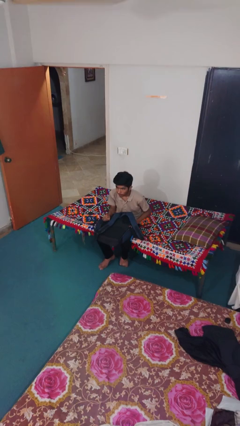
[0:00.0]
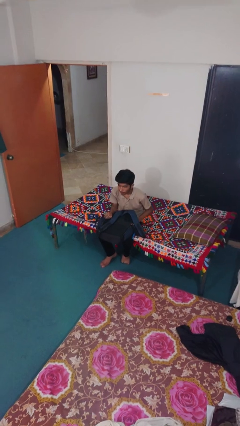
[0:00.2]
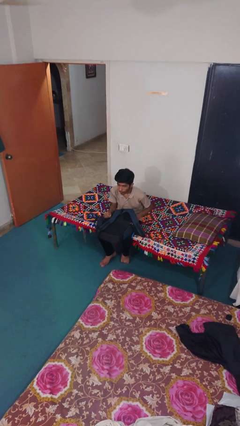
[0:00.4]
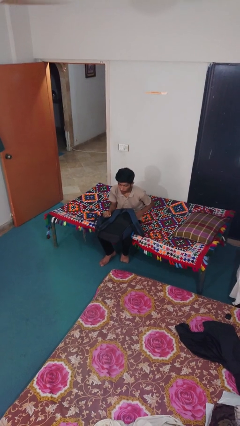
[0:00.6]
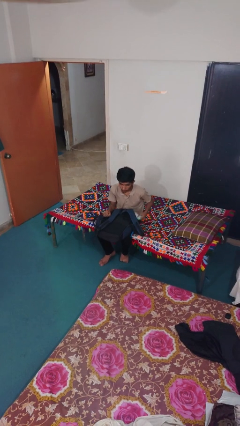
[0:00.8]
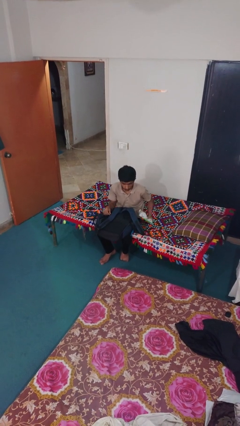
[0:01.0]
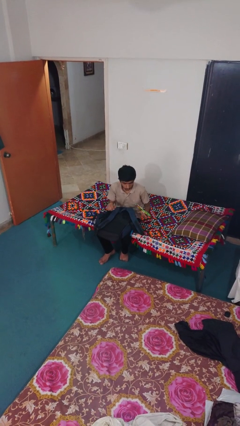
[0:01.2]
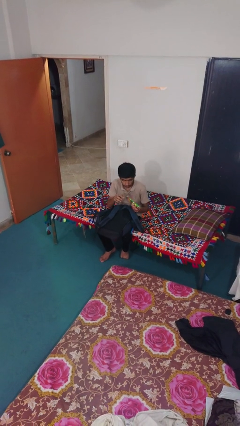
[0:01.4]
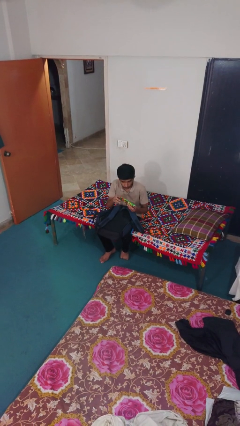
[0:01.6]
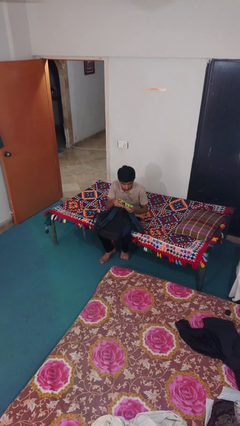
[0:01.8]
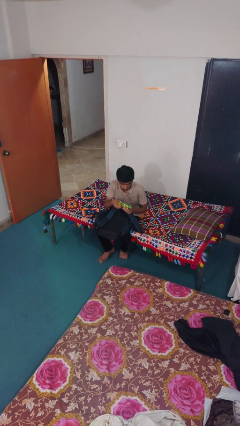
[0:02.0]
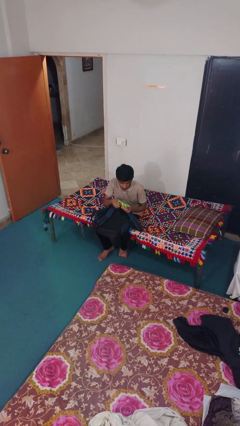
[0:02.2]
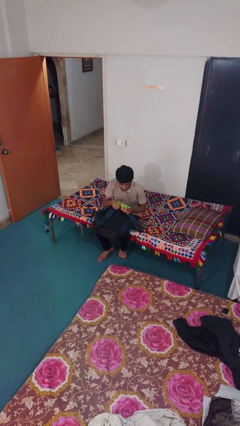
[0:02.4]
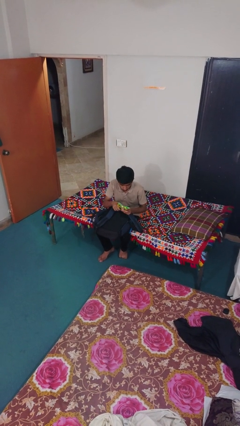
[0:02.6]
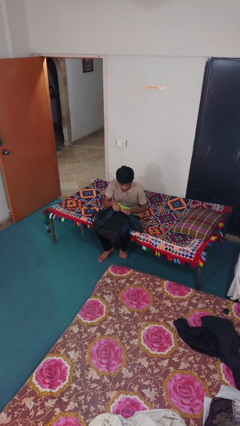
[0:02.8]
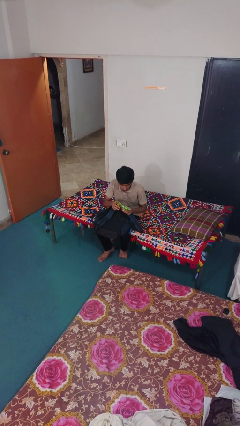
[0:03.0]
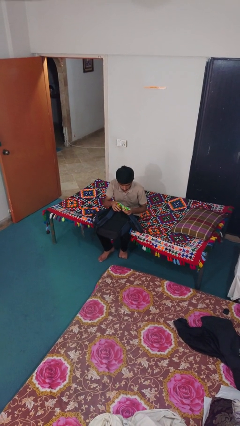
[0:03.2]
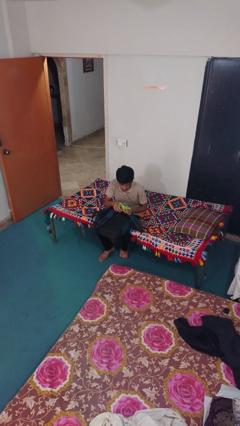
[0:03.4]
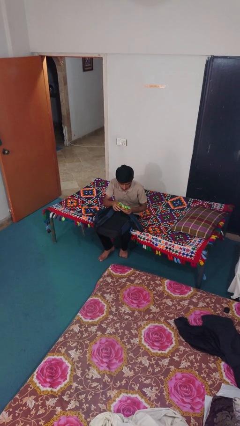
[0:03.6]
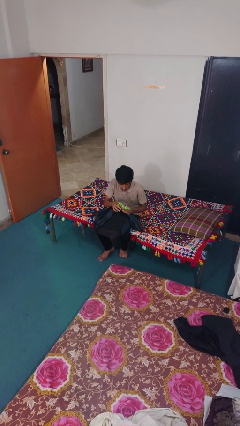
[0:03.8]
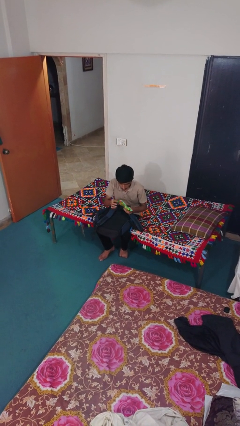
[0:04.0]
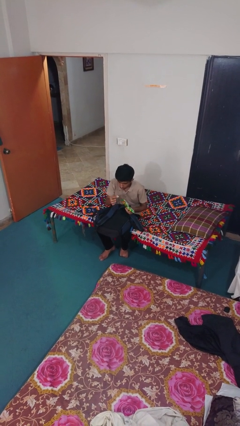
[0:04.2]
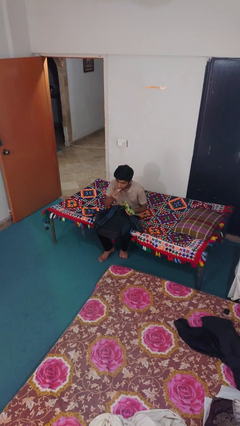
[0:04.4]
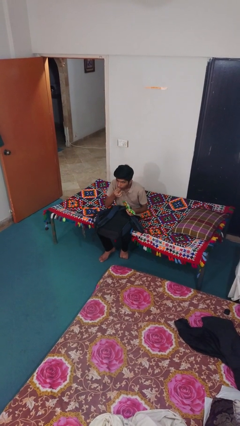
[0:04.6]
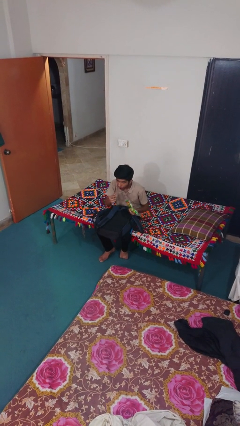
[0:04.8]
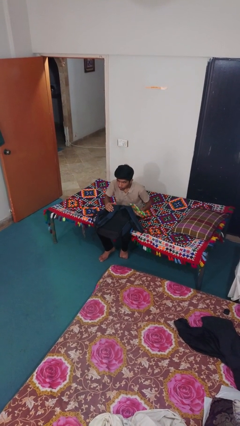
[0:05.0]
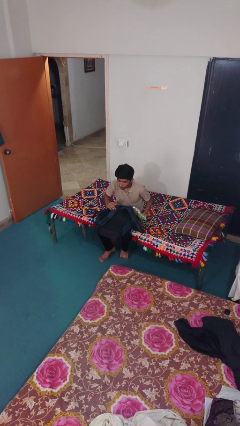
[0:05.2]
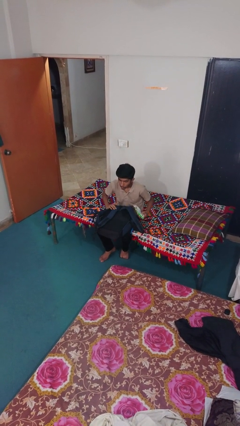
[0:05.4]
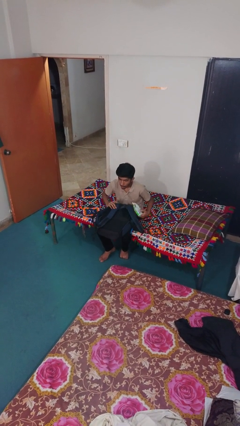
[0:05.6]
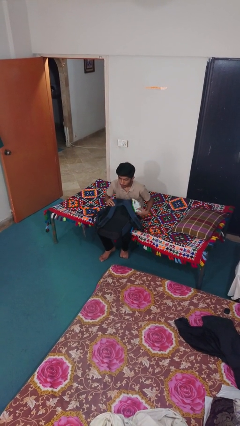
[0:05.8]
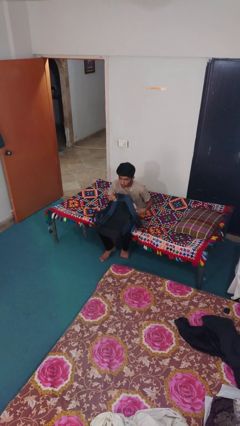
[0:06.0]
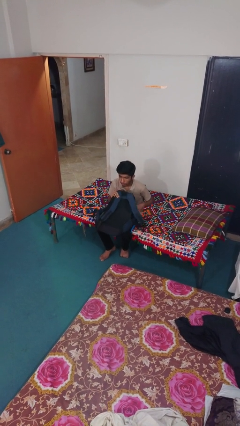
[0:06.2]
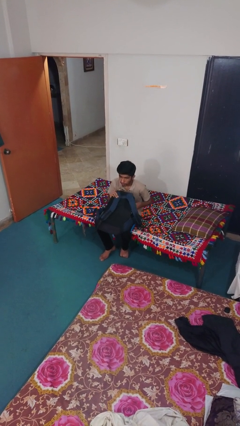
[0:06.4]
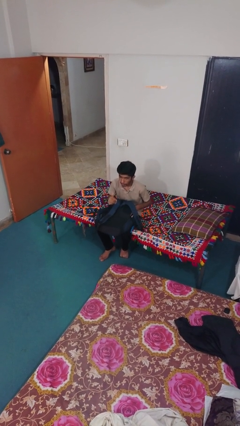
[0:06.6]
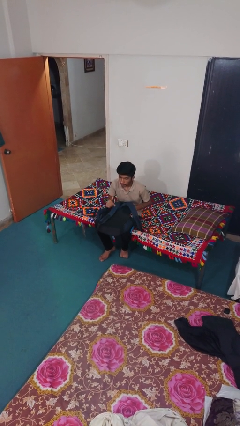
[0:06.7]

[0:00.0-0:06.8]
person eats snack from bag

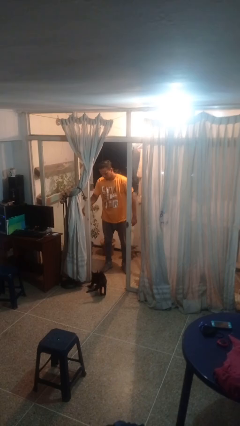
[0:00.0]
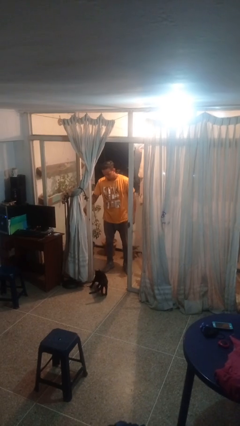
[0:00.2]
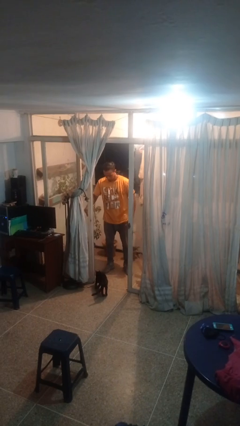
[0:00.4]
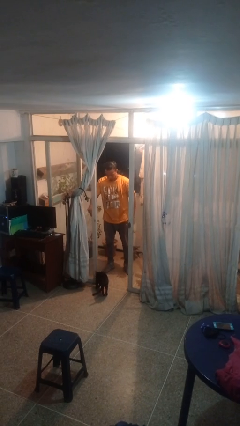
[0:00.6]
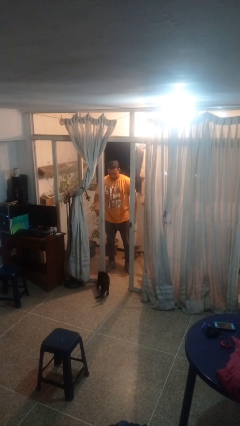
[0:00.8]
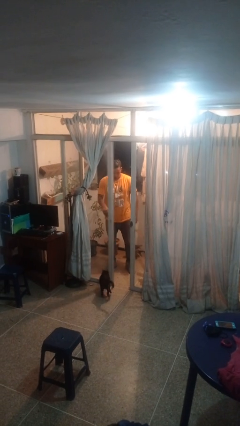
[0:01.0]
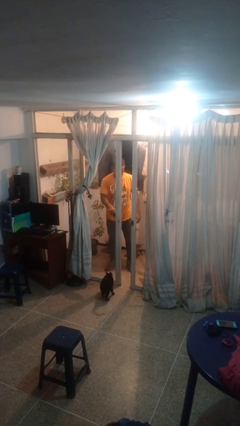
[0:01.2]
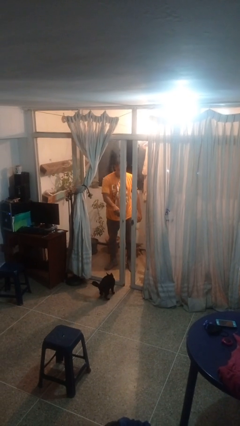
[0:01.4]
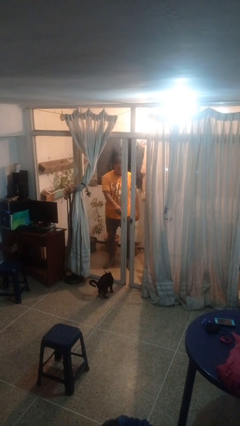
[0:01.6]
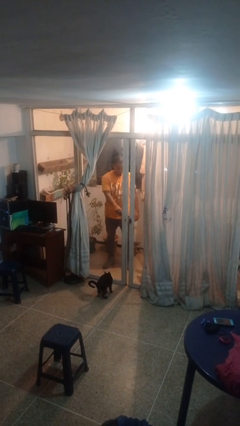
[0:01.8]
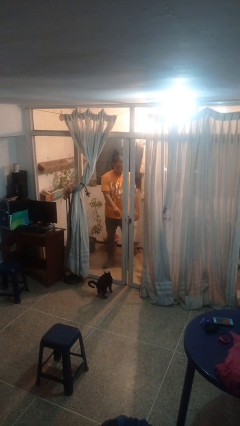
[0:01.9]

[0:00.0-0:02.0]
person closes sliding door

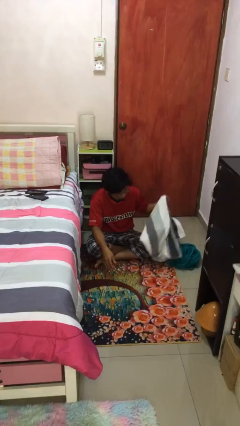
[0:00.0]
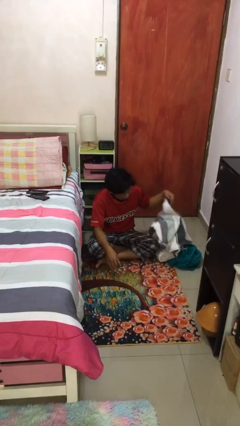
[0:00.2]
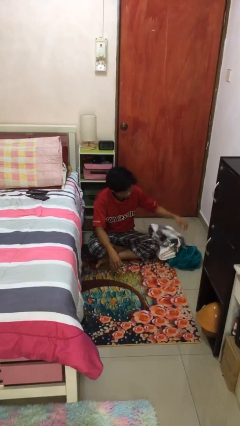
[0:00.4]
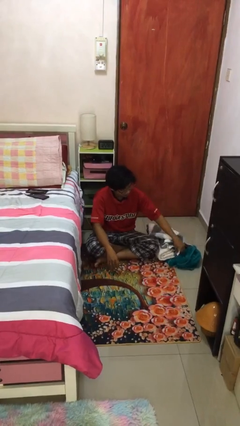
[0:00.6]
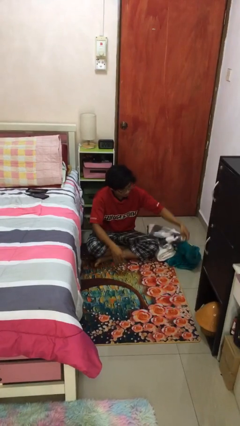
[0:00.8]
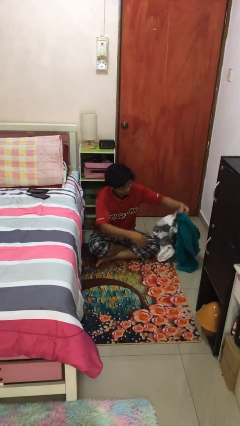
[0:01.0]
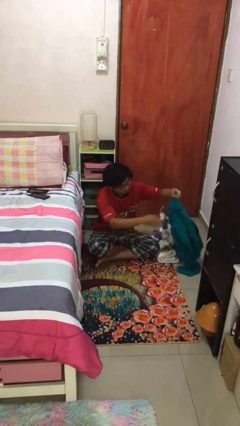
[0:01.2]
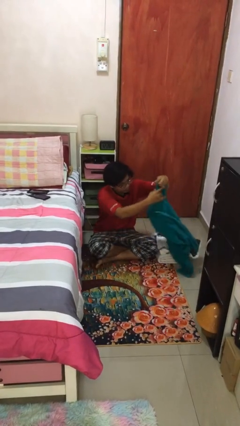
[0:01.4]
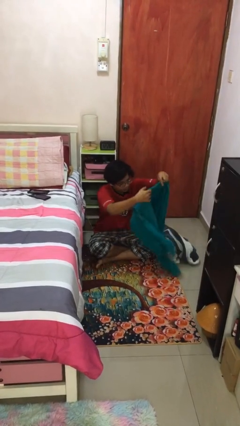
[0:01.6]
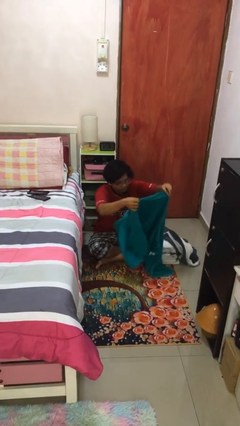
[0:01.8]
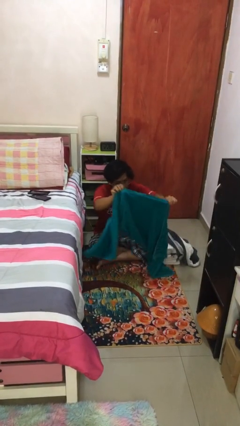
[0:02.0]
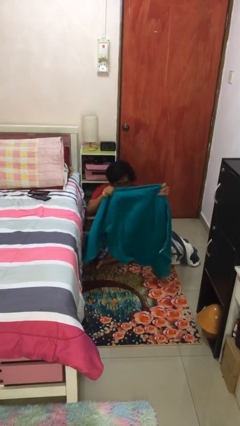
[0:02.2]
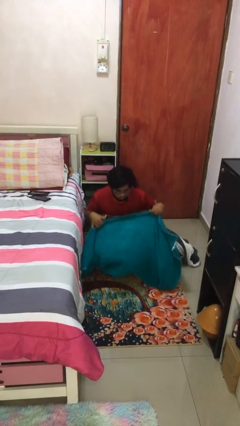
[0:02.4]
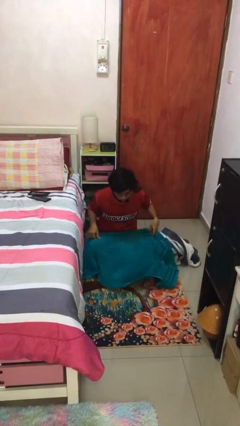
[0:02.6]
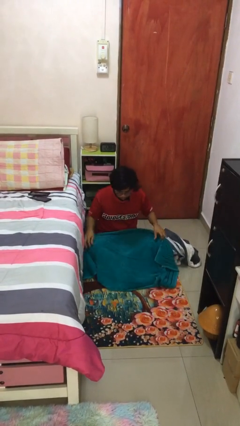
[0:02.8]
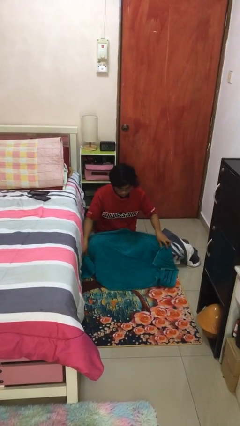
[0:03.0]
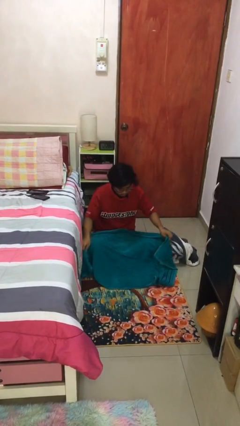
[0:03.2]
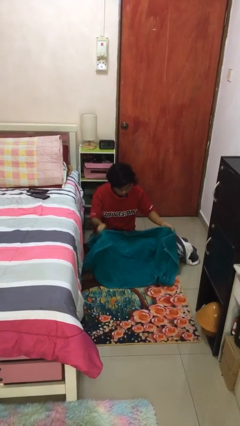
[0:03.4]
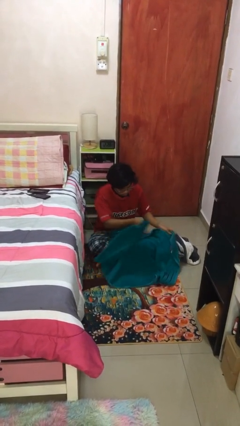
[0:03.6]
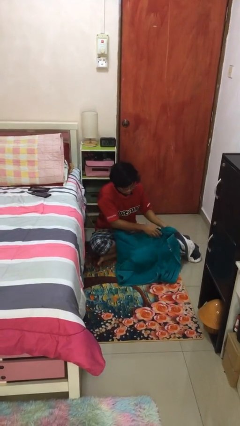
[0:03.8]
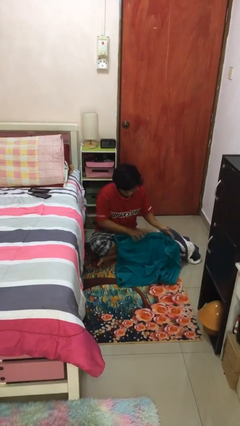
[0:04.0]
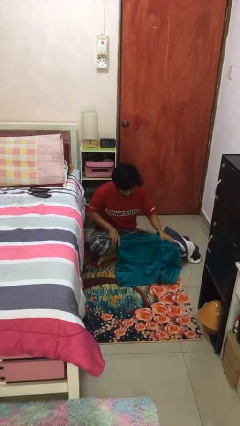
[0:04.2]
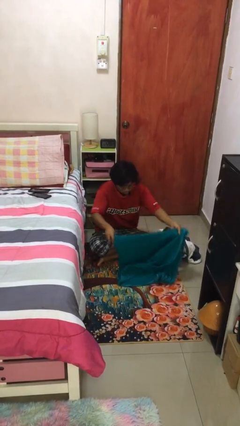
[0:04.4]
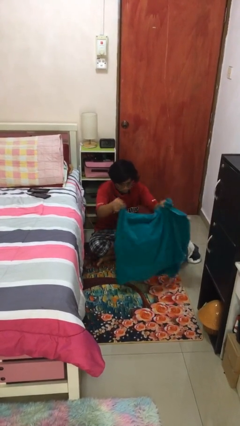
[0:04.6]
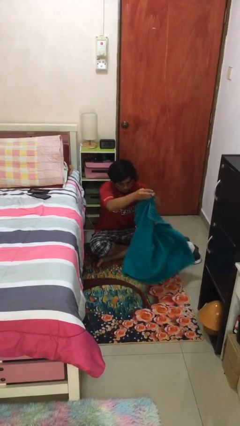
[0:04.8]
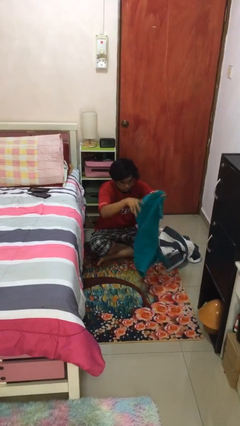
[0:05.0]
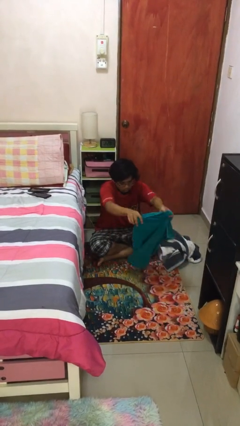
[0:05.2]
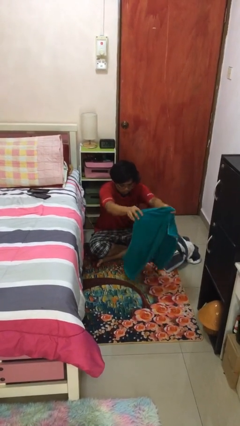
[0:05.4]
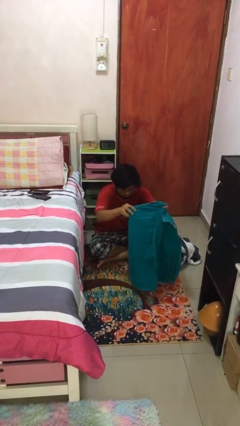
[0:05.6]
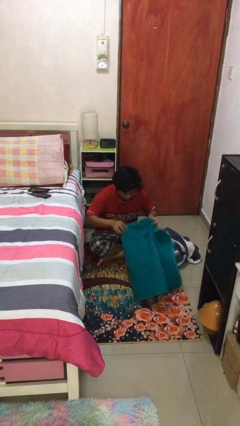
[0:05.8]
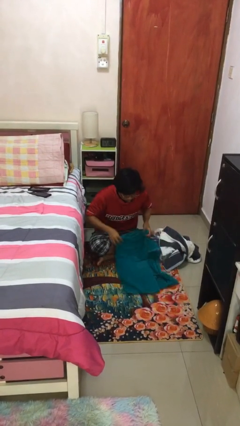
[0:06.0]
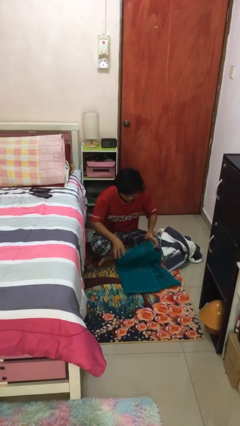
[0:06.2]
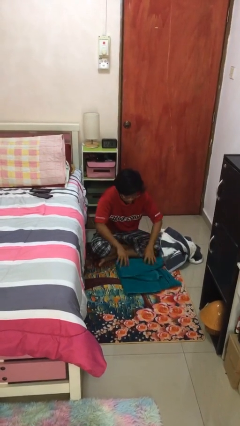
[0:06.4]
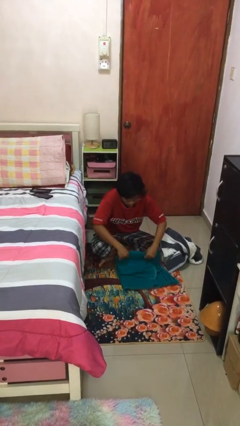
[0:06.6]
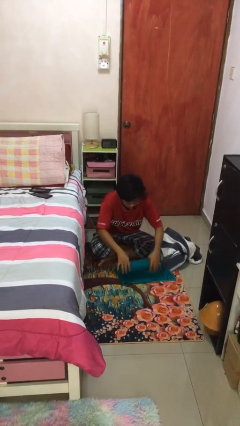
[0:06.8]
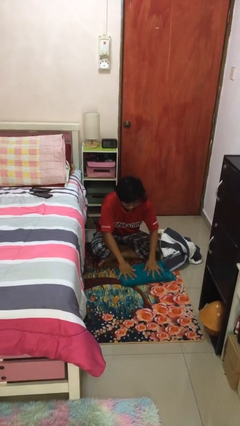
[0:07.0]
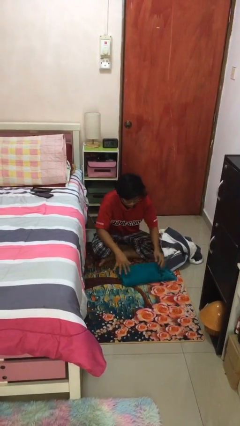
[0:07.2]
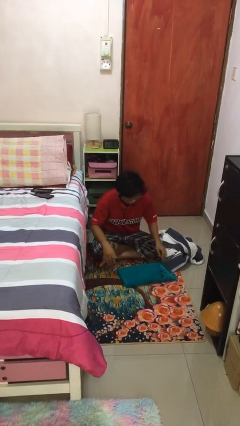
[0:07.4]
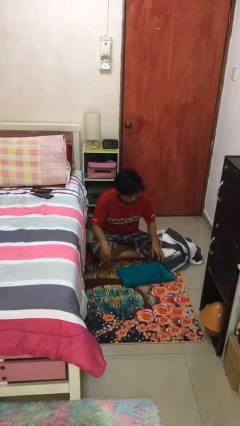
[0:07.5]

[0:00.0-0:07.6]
person folds towel

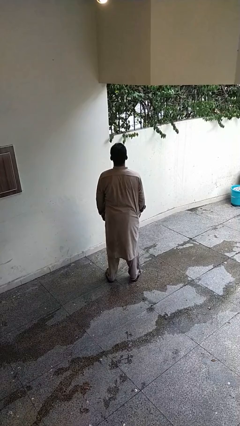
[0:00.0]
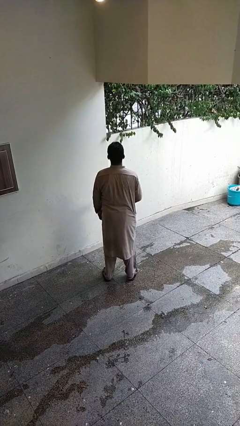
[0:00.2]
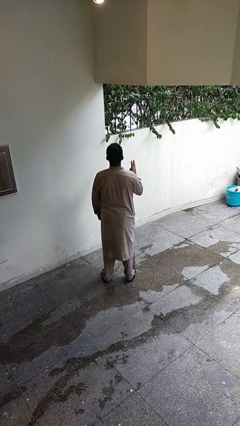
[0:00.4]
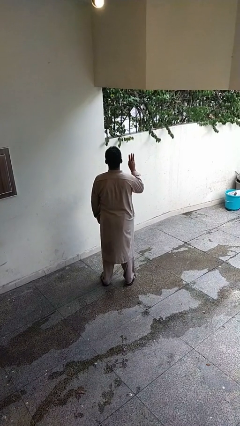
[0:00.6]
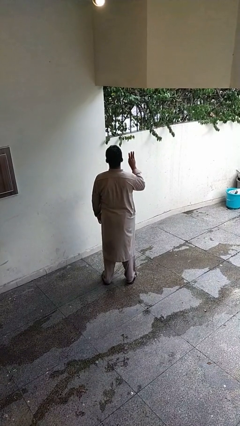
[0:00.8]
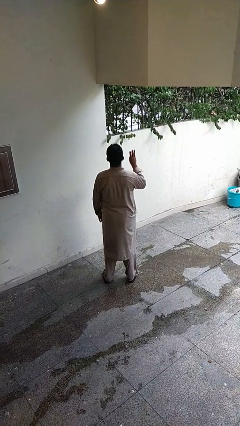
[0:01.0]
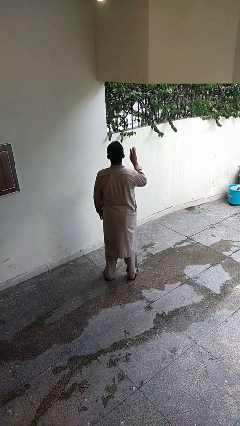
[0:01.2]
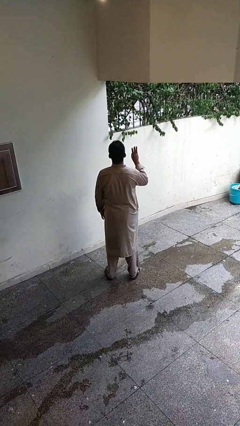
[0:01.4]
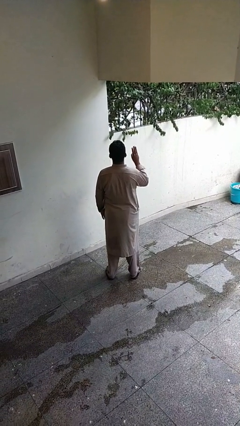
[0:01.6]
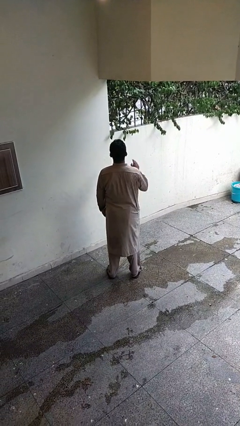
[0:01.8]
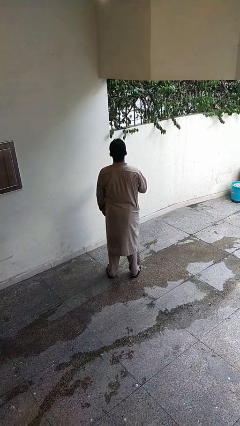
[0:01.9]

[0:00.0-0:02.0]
person gestures number three
